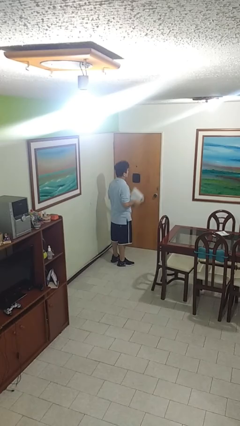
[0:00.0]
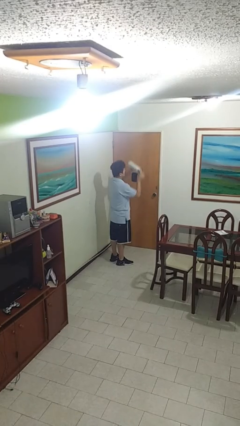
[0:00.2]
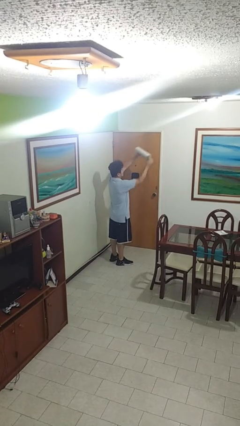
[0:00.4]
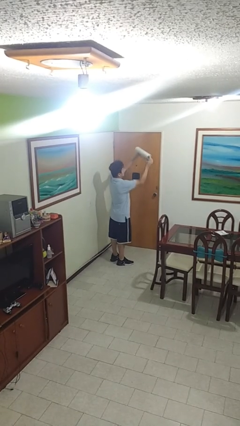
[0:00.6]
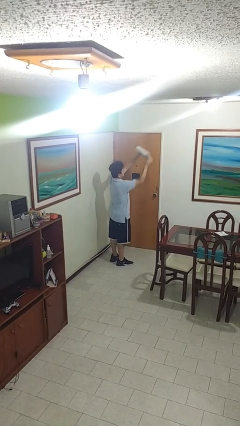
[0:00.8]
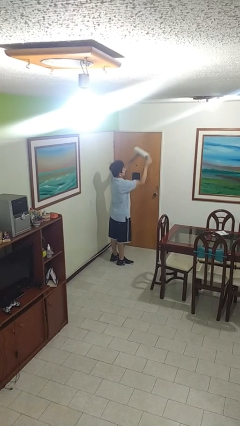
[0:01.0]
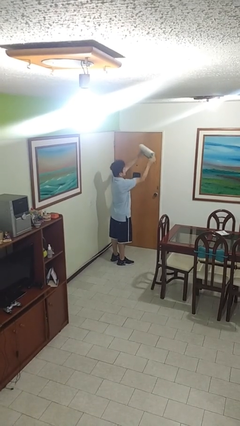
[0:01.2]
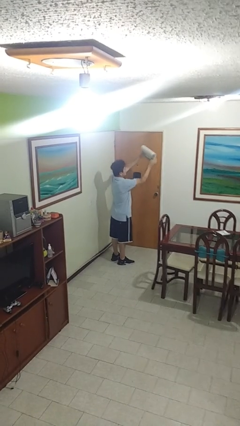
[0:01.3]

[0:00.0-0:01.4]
person holds object above head

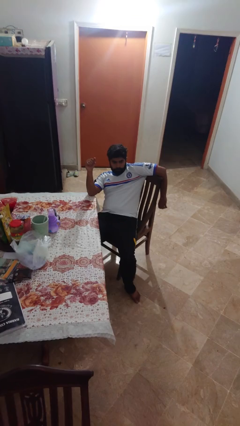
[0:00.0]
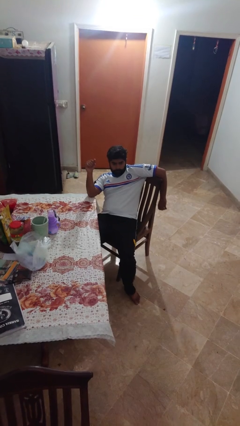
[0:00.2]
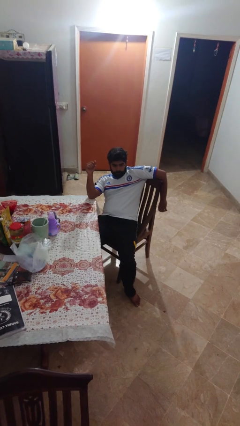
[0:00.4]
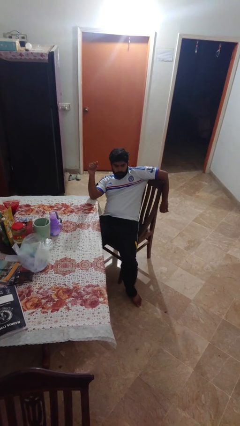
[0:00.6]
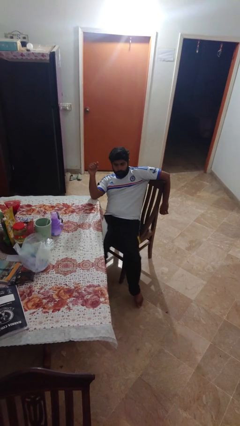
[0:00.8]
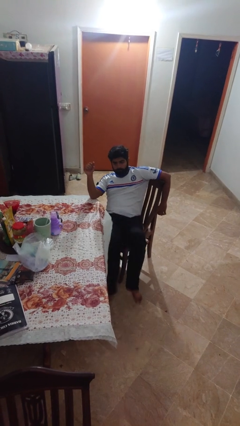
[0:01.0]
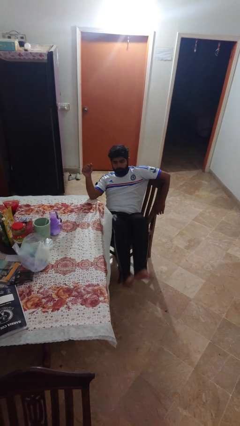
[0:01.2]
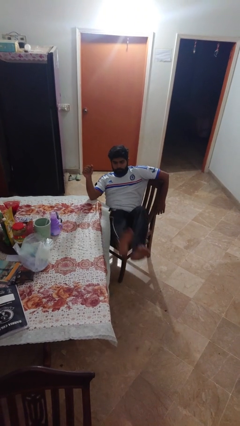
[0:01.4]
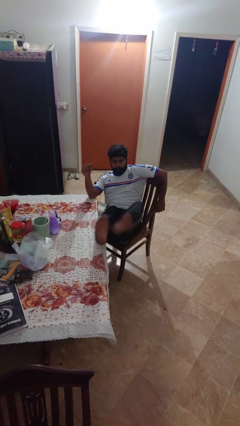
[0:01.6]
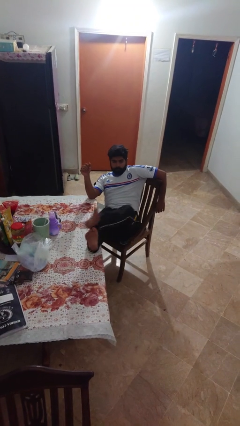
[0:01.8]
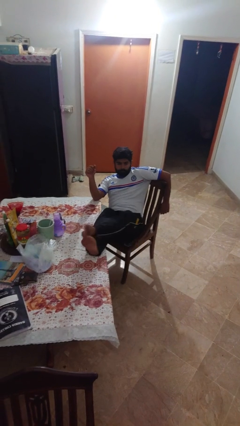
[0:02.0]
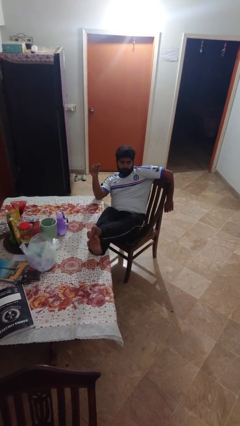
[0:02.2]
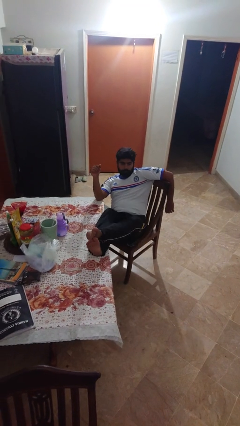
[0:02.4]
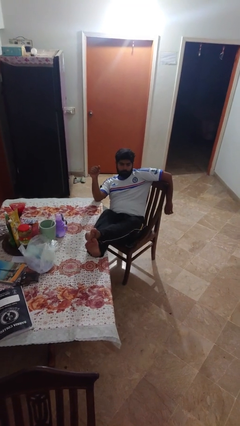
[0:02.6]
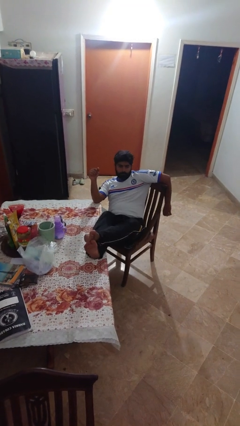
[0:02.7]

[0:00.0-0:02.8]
person puts feet up

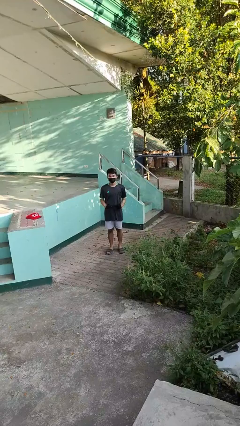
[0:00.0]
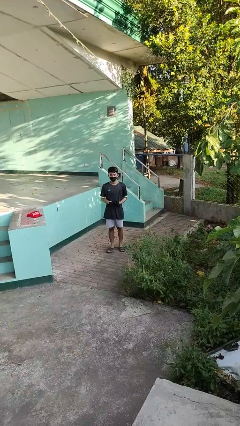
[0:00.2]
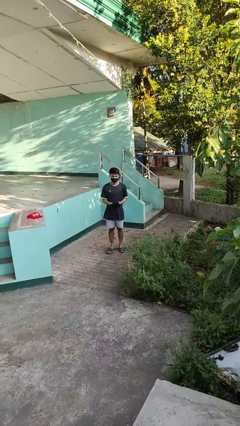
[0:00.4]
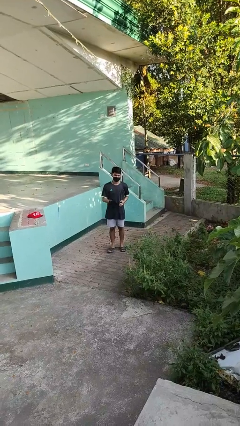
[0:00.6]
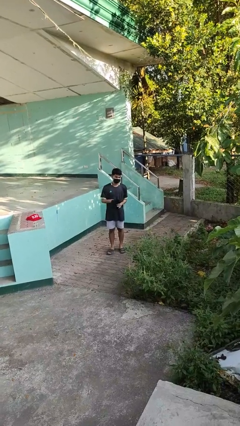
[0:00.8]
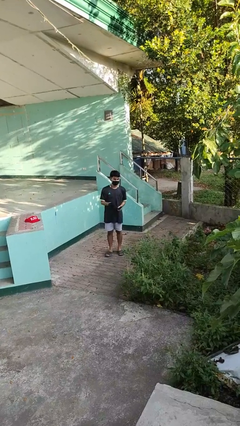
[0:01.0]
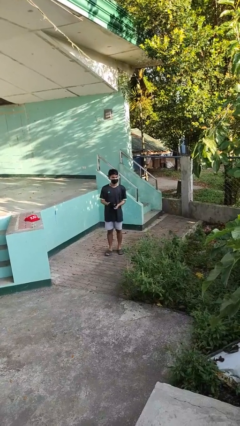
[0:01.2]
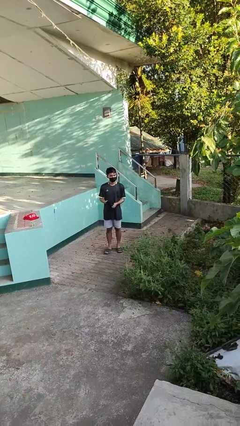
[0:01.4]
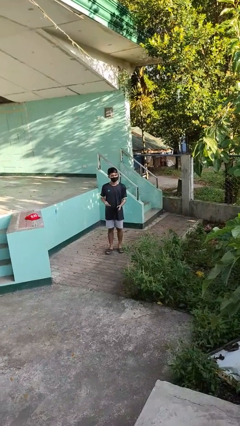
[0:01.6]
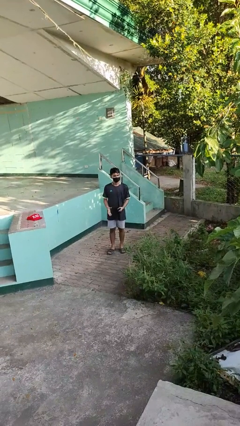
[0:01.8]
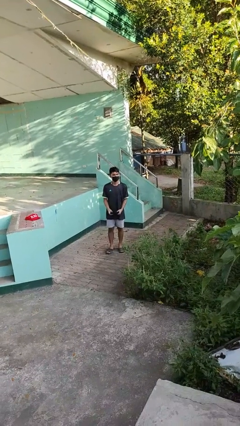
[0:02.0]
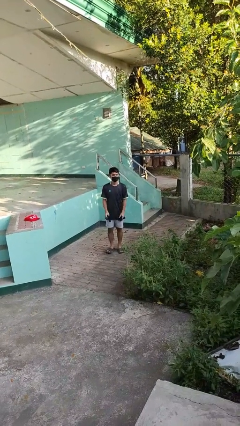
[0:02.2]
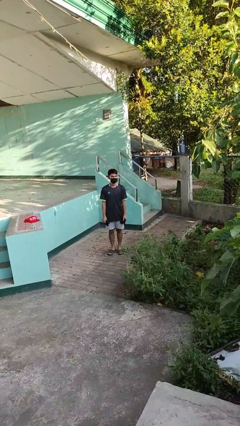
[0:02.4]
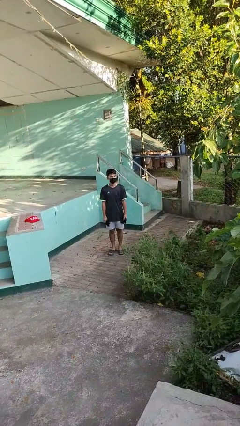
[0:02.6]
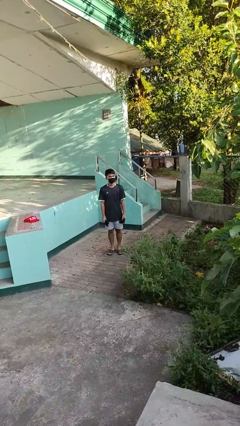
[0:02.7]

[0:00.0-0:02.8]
person takes off gloves

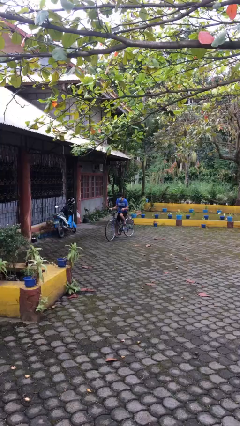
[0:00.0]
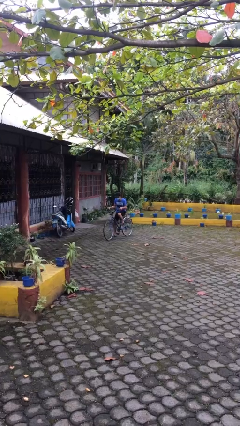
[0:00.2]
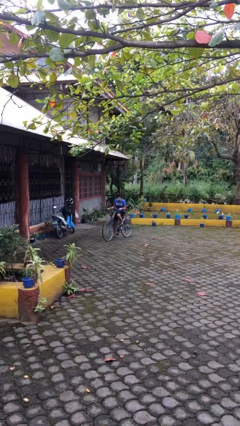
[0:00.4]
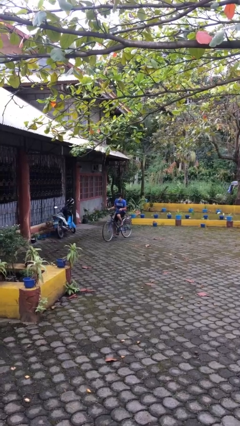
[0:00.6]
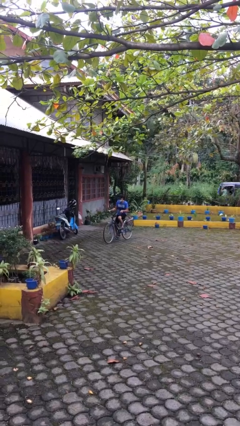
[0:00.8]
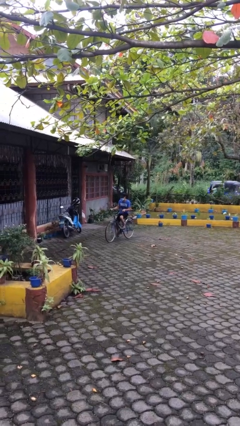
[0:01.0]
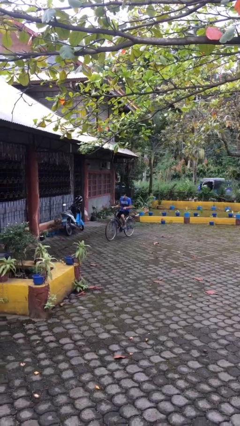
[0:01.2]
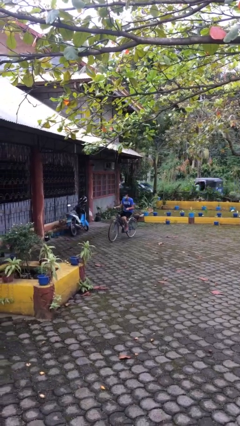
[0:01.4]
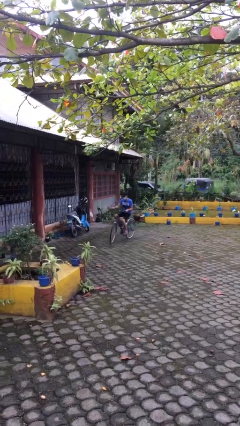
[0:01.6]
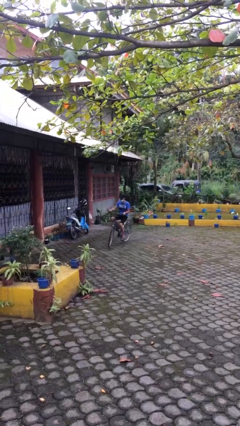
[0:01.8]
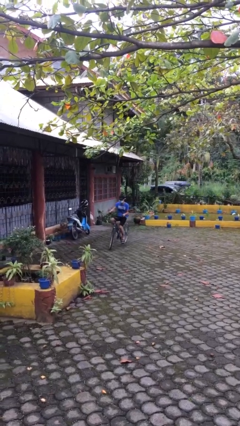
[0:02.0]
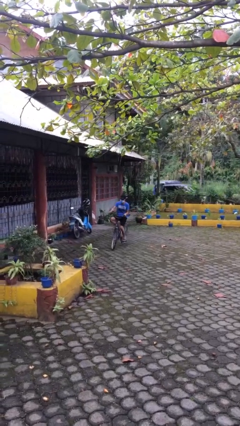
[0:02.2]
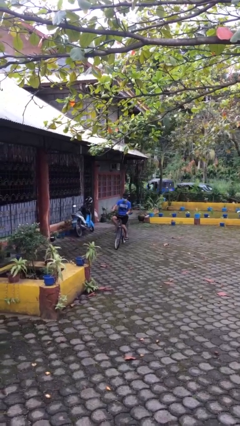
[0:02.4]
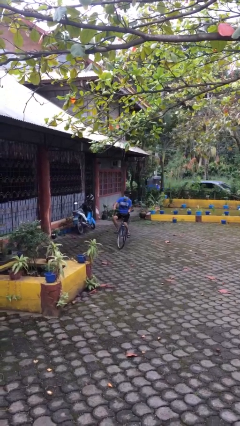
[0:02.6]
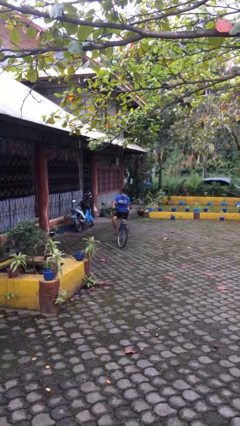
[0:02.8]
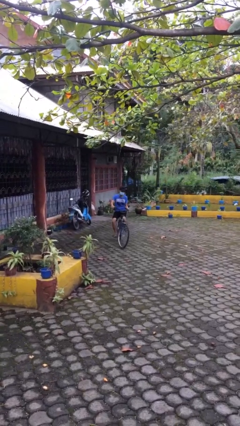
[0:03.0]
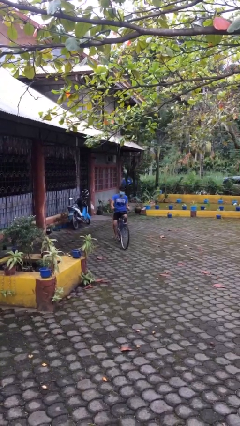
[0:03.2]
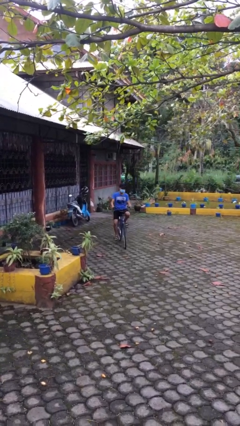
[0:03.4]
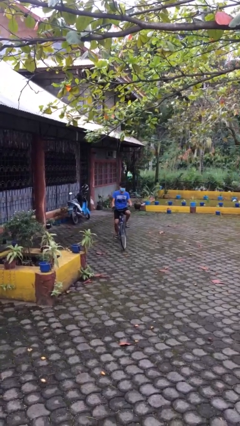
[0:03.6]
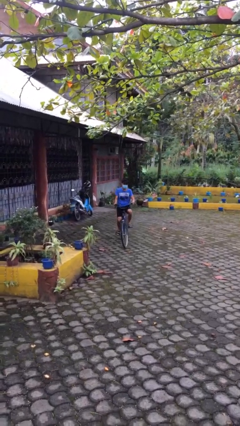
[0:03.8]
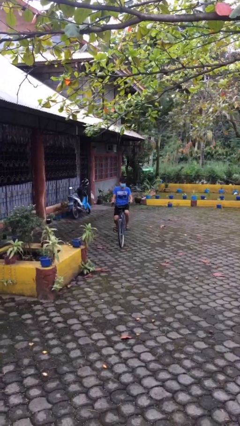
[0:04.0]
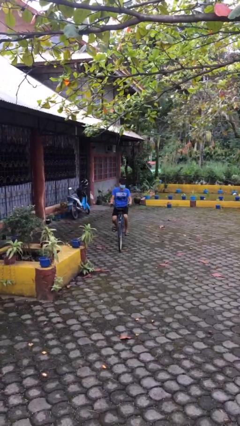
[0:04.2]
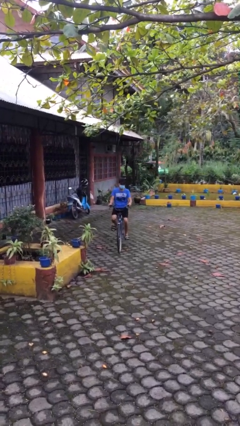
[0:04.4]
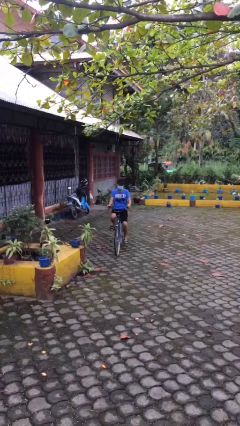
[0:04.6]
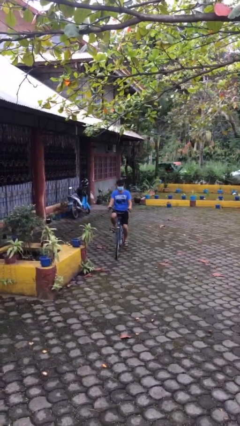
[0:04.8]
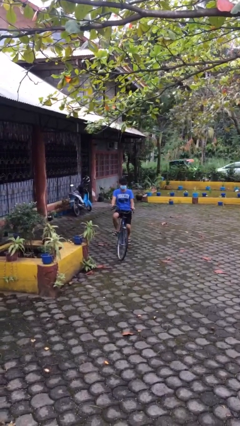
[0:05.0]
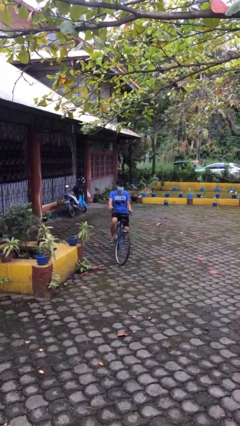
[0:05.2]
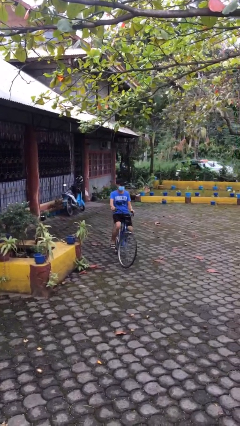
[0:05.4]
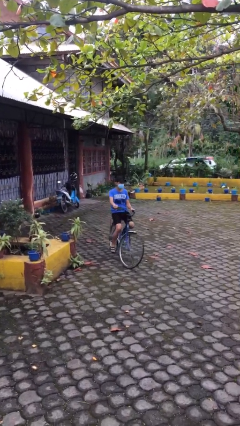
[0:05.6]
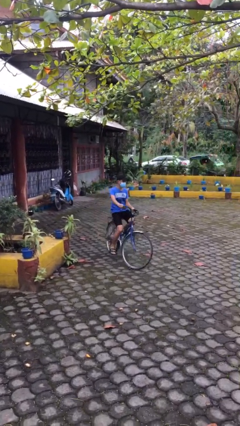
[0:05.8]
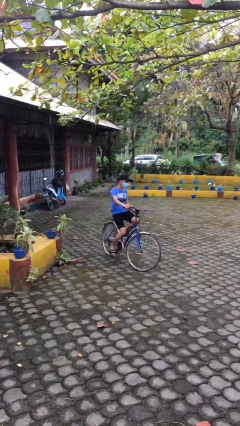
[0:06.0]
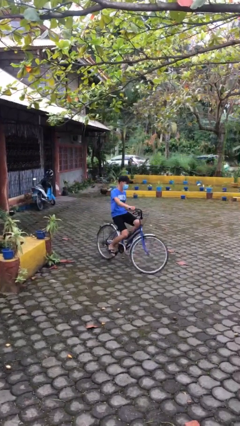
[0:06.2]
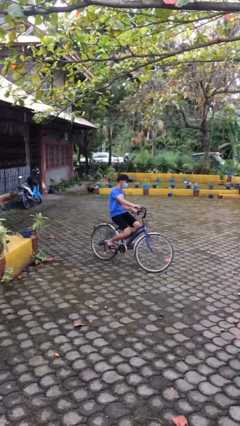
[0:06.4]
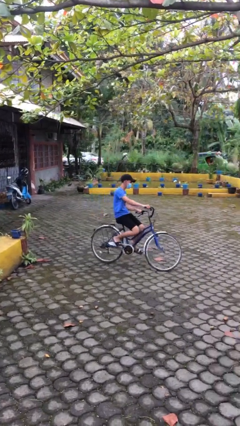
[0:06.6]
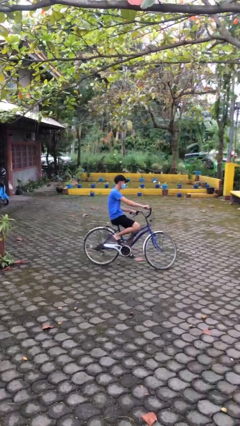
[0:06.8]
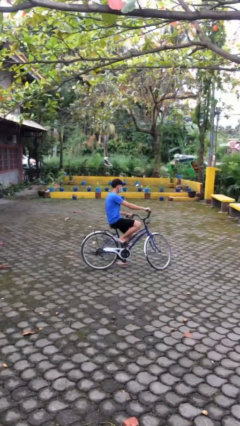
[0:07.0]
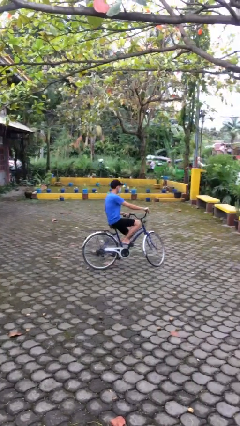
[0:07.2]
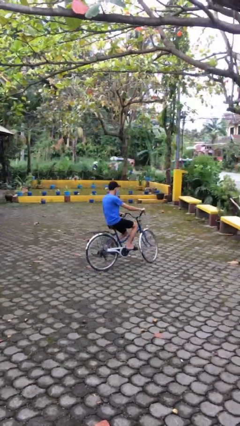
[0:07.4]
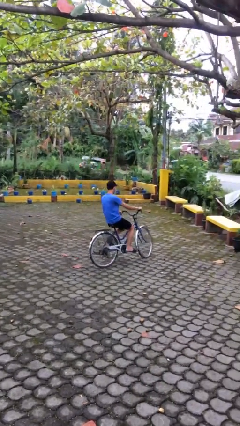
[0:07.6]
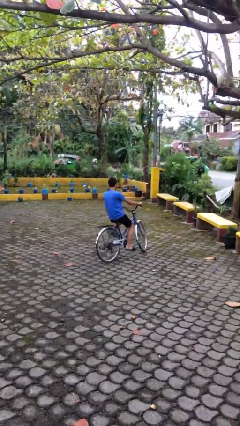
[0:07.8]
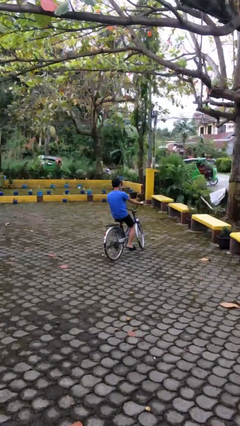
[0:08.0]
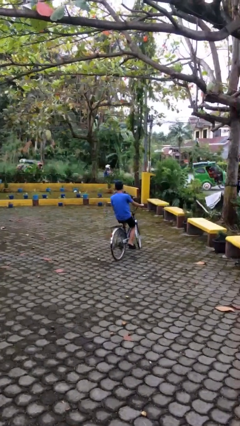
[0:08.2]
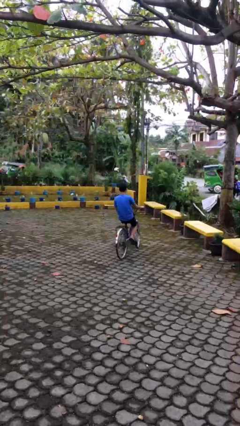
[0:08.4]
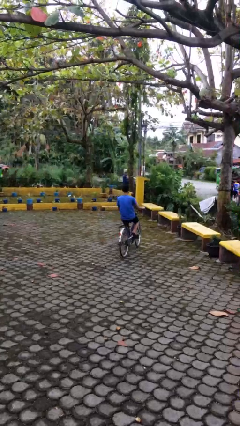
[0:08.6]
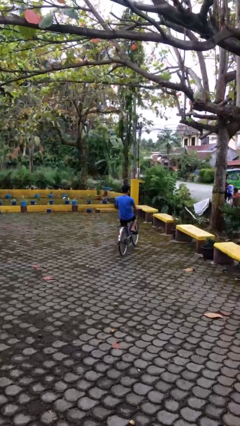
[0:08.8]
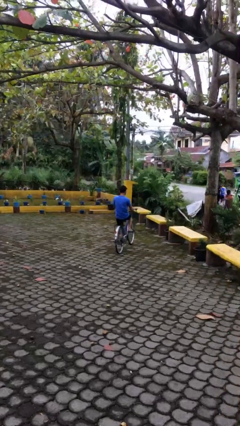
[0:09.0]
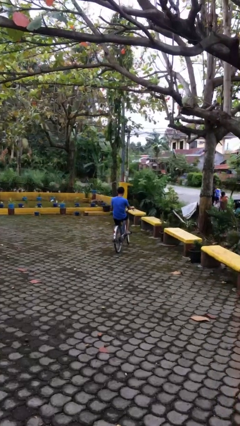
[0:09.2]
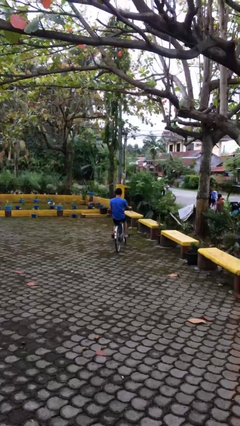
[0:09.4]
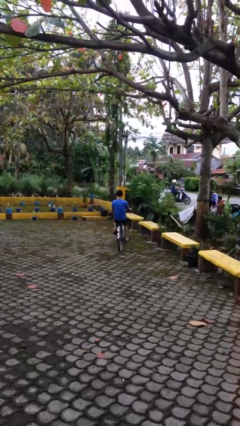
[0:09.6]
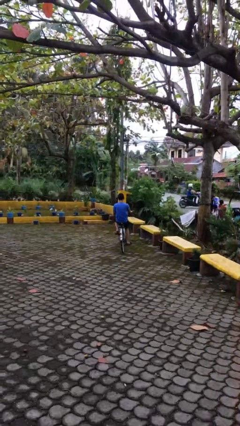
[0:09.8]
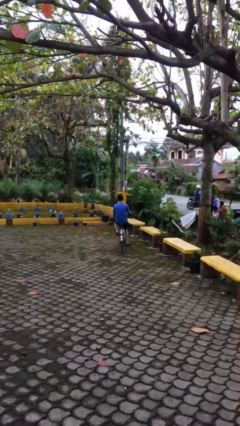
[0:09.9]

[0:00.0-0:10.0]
person rides bicycle

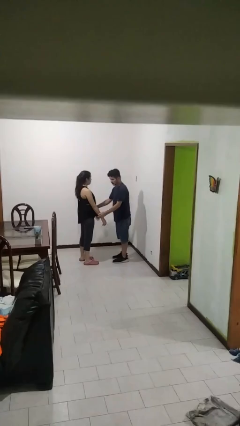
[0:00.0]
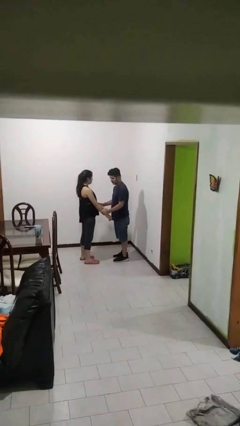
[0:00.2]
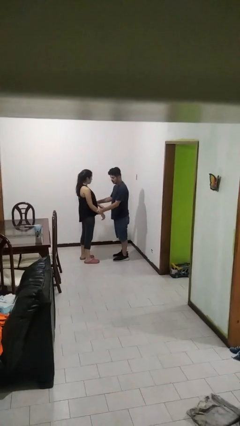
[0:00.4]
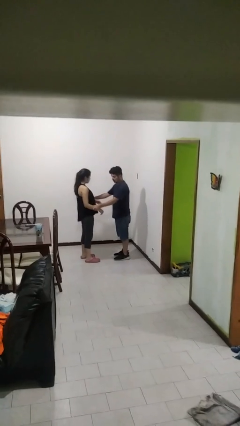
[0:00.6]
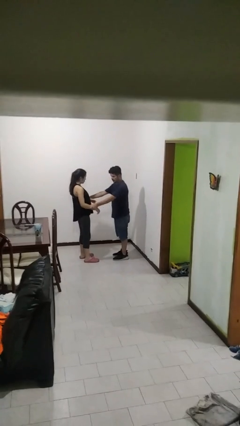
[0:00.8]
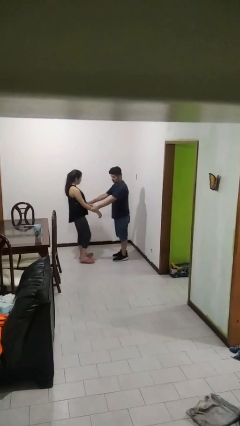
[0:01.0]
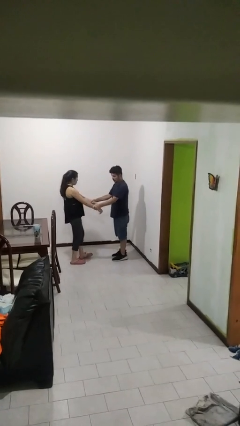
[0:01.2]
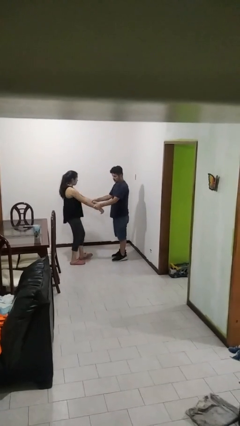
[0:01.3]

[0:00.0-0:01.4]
person grabs person by forearm
